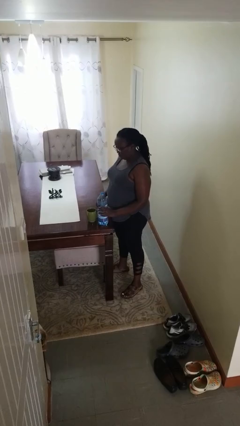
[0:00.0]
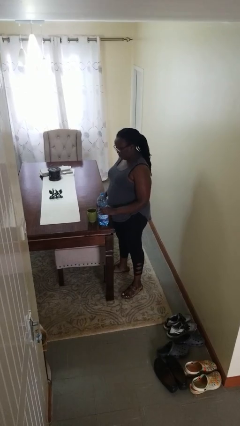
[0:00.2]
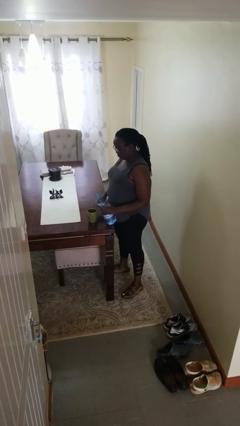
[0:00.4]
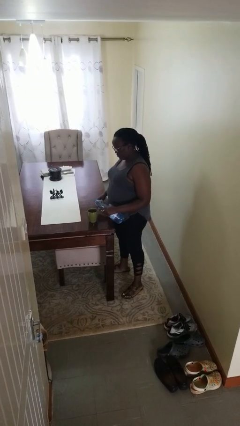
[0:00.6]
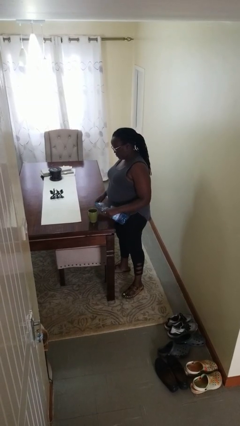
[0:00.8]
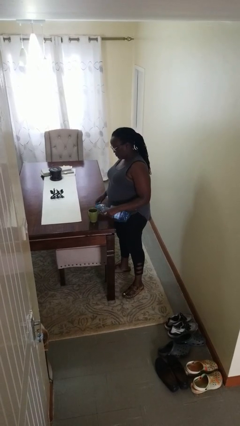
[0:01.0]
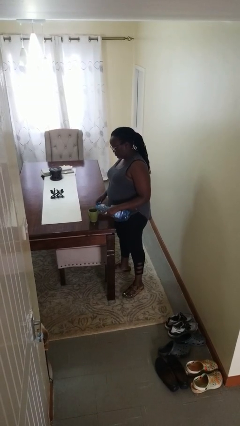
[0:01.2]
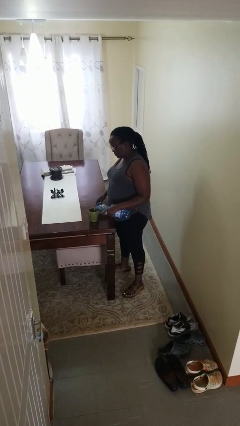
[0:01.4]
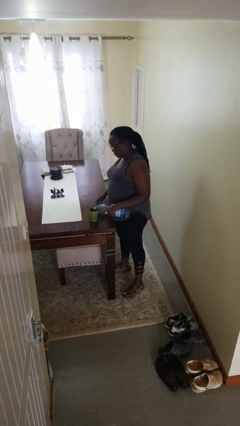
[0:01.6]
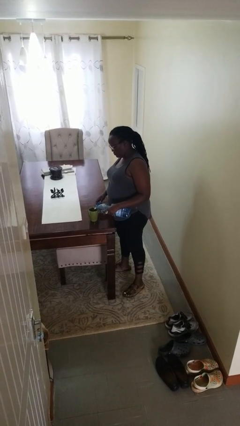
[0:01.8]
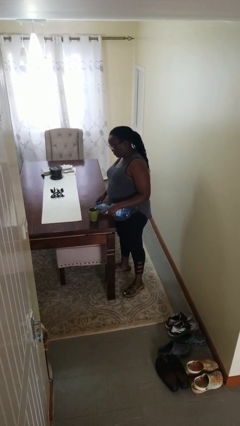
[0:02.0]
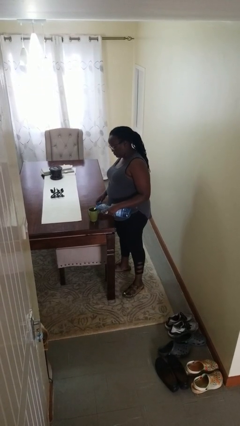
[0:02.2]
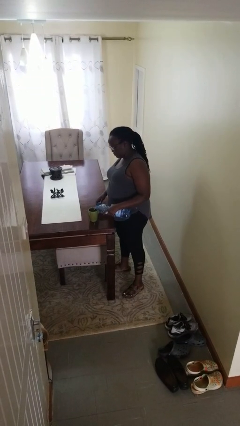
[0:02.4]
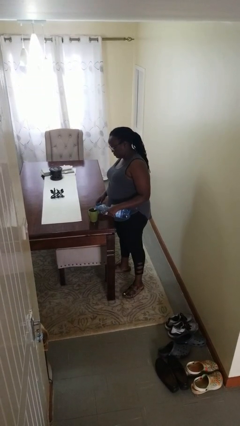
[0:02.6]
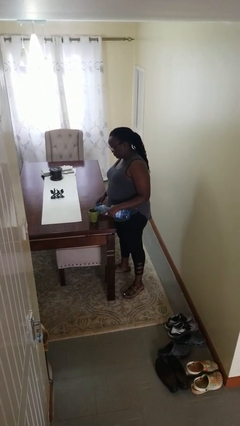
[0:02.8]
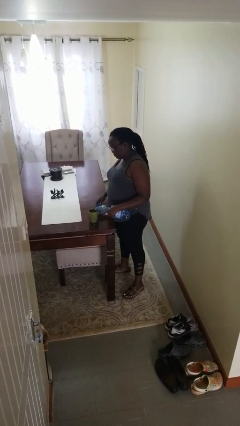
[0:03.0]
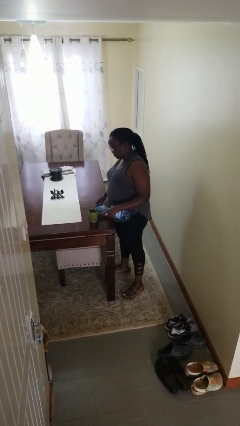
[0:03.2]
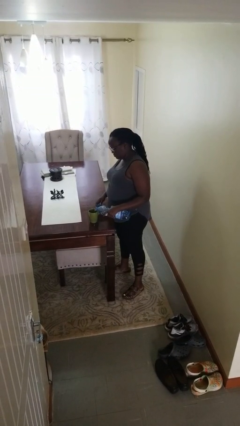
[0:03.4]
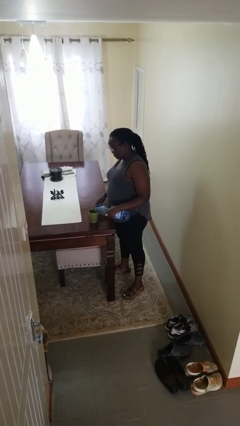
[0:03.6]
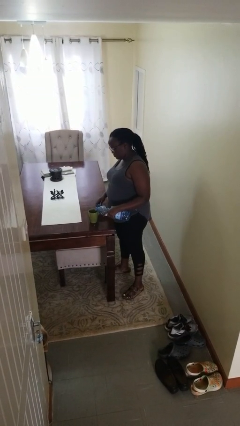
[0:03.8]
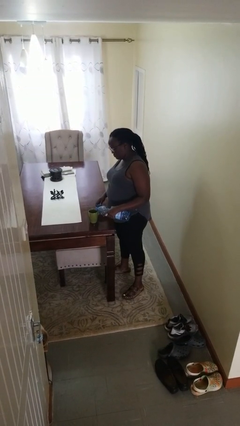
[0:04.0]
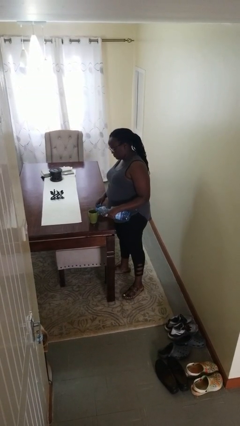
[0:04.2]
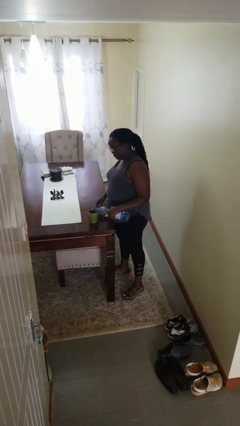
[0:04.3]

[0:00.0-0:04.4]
person pours liquid into cup

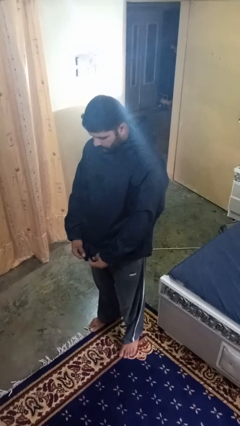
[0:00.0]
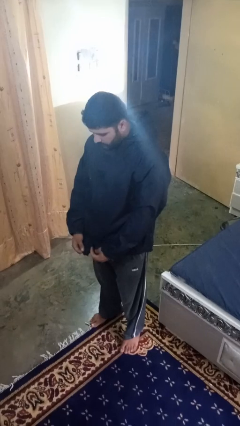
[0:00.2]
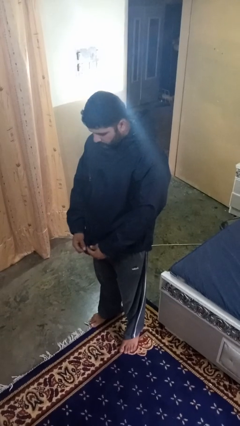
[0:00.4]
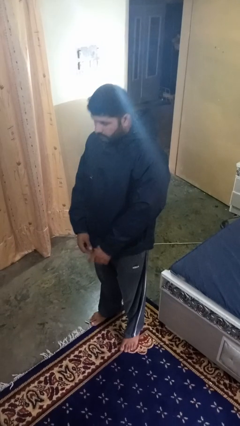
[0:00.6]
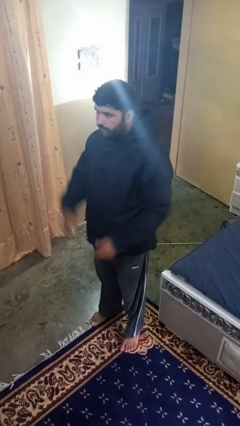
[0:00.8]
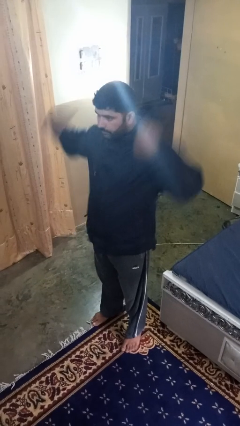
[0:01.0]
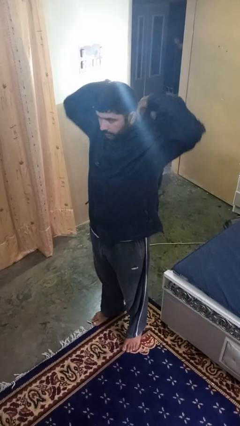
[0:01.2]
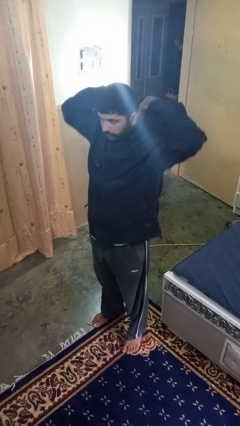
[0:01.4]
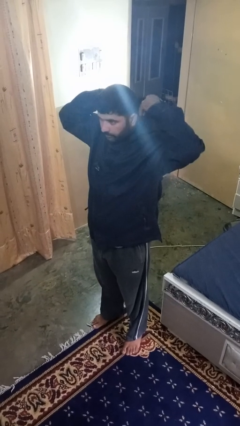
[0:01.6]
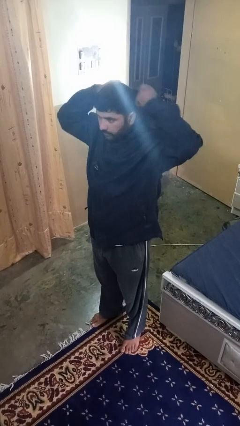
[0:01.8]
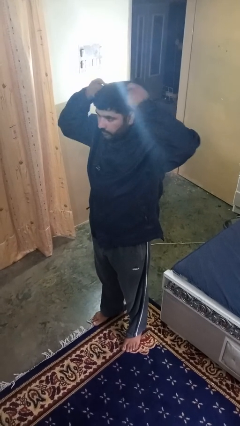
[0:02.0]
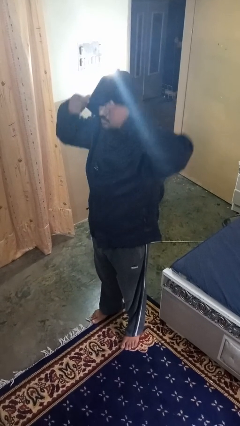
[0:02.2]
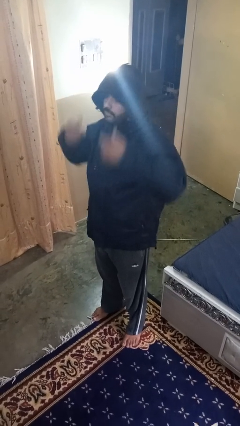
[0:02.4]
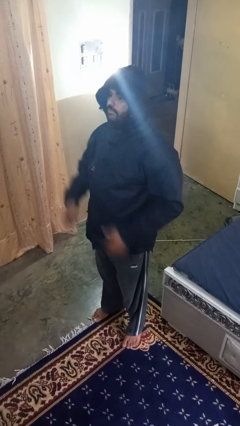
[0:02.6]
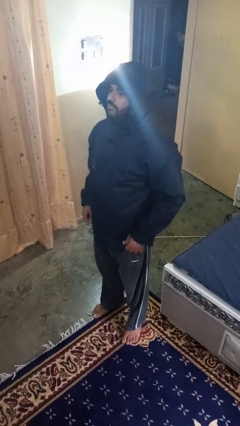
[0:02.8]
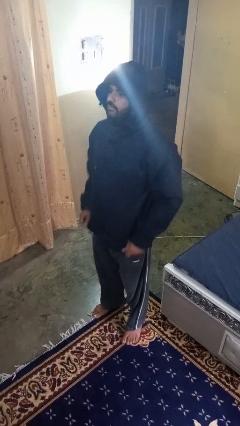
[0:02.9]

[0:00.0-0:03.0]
person puts on hoodie

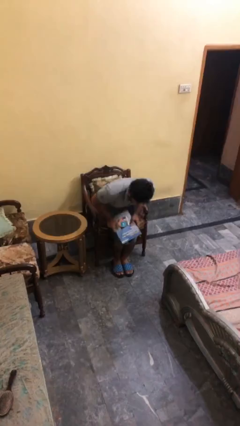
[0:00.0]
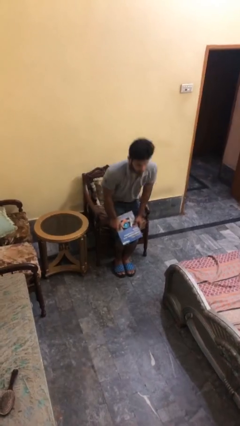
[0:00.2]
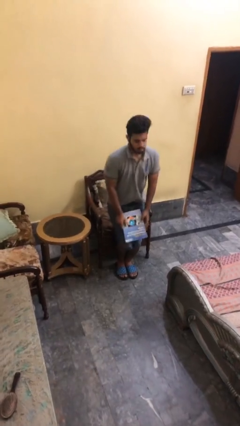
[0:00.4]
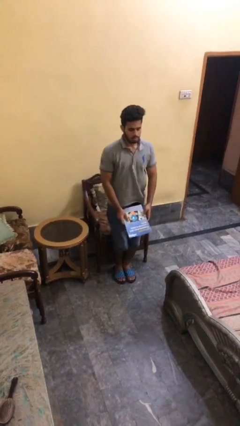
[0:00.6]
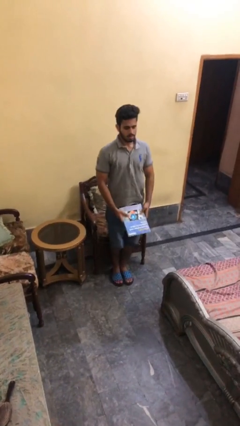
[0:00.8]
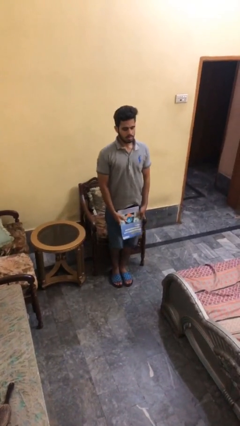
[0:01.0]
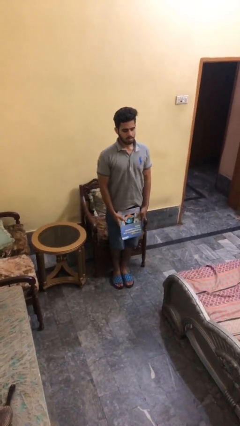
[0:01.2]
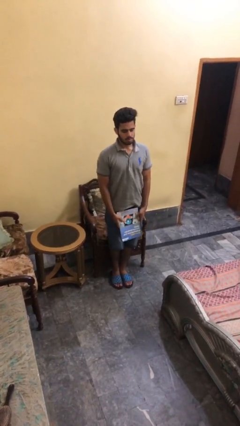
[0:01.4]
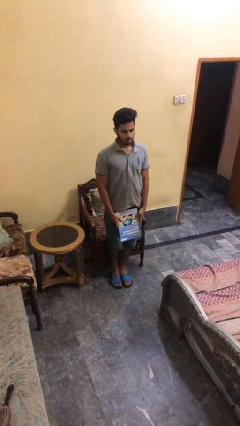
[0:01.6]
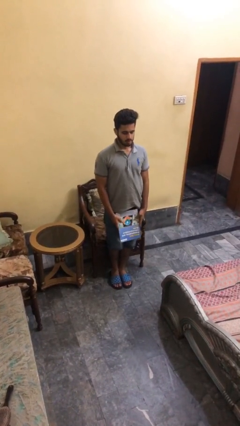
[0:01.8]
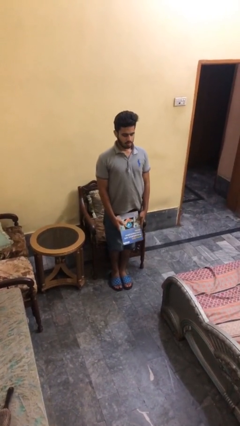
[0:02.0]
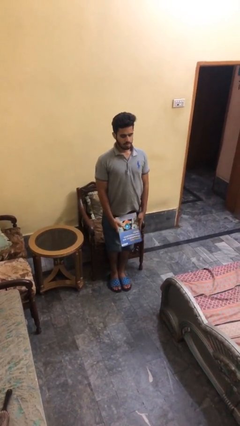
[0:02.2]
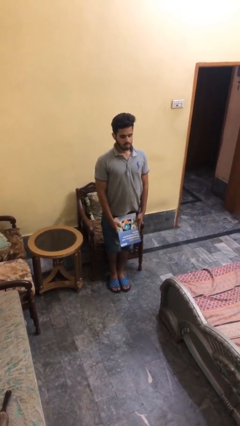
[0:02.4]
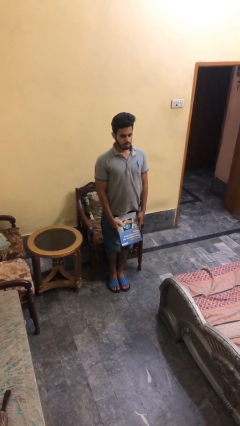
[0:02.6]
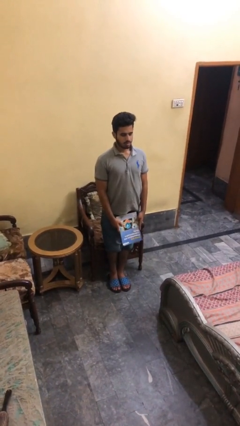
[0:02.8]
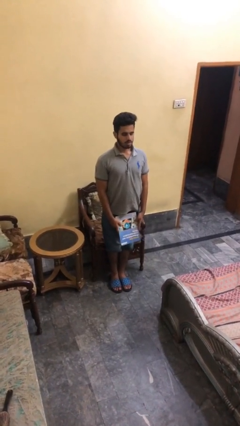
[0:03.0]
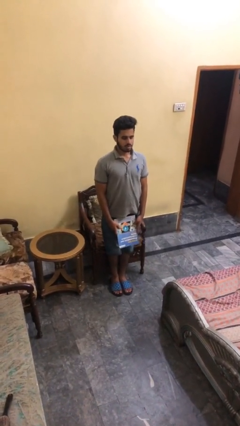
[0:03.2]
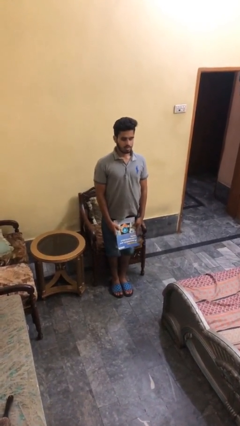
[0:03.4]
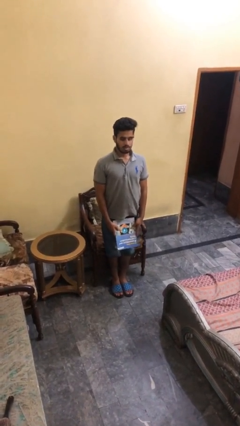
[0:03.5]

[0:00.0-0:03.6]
person stands up

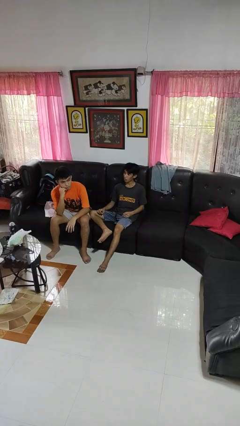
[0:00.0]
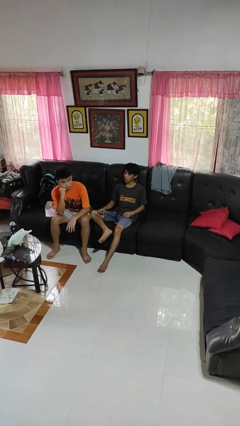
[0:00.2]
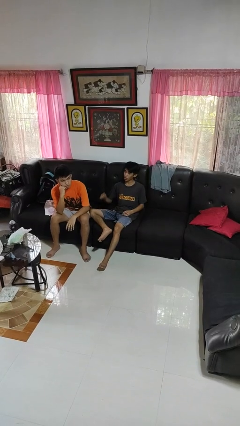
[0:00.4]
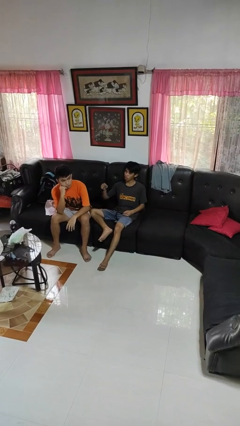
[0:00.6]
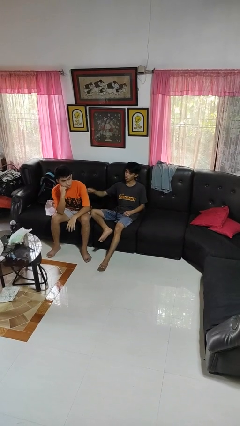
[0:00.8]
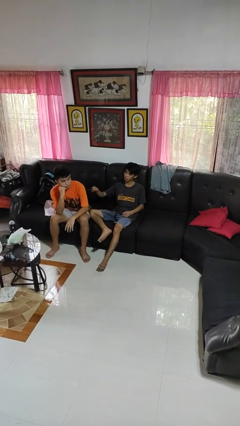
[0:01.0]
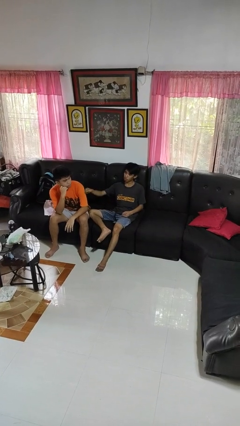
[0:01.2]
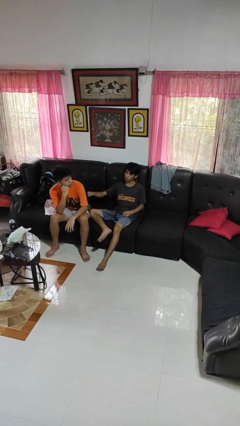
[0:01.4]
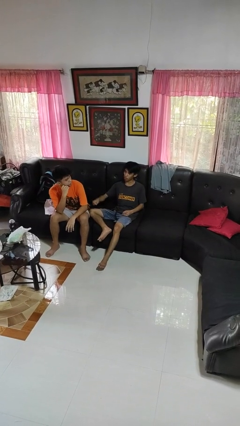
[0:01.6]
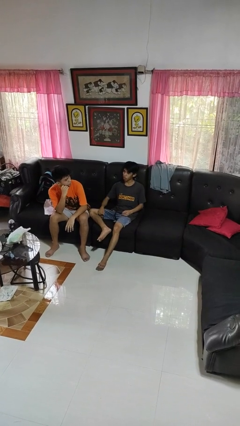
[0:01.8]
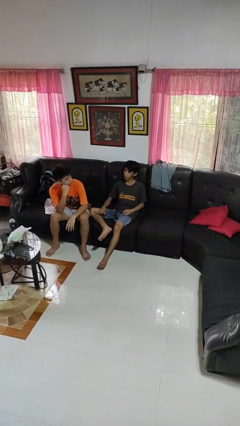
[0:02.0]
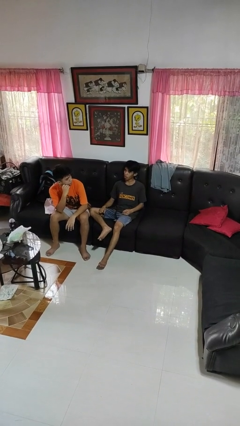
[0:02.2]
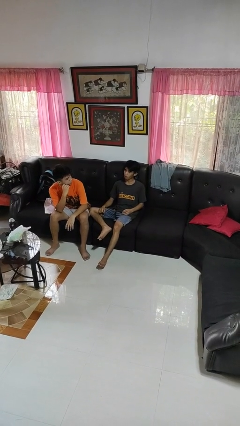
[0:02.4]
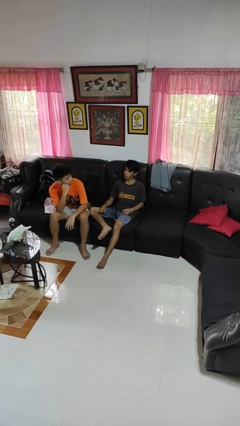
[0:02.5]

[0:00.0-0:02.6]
person pounds shoulders of person

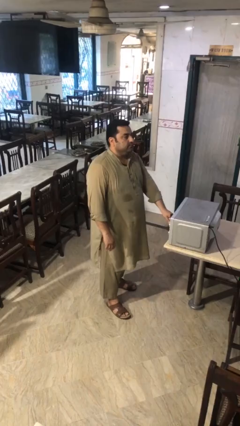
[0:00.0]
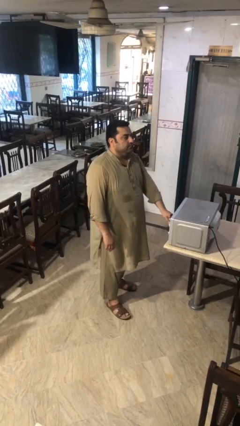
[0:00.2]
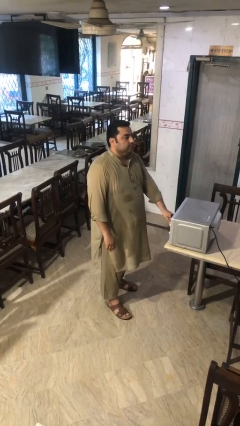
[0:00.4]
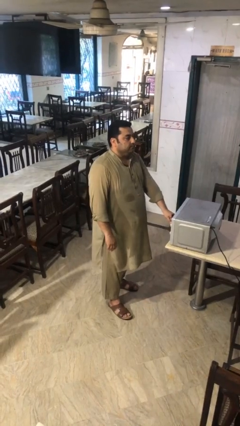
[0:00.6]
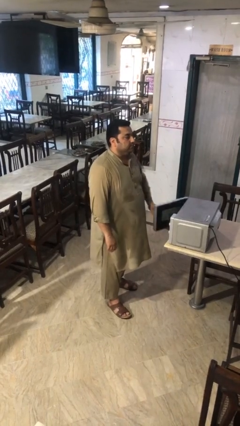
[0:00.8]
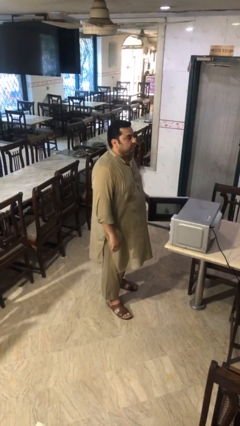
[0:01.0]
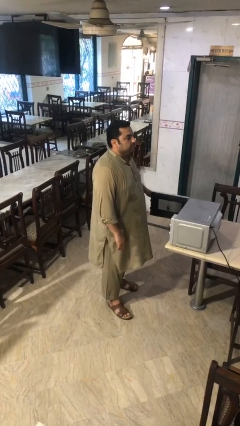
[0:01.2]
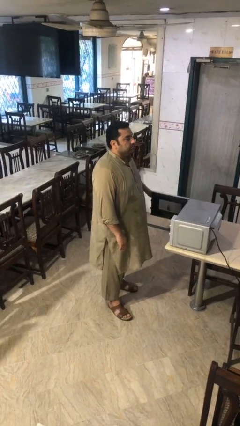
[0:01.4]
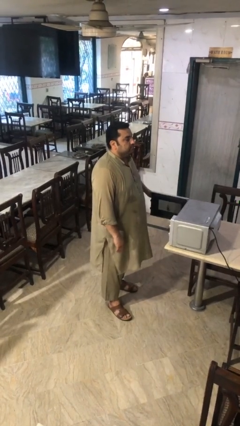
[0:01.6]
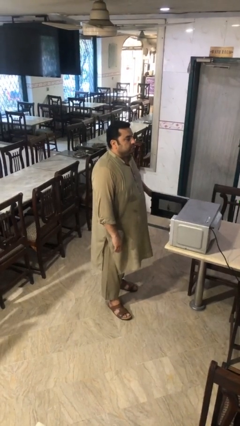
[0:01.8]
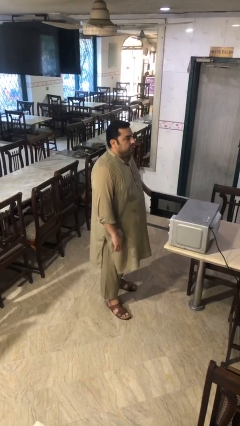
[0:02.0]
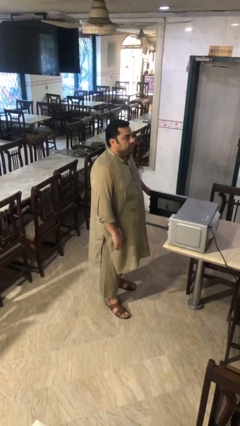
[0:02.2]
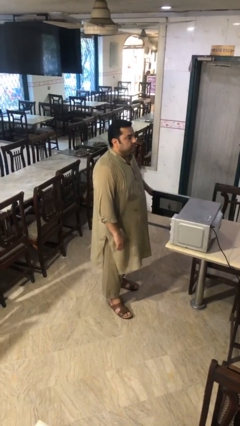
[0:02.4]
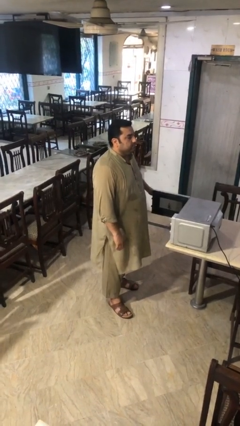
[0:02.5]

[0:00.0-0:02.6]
person opens microwave

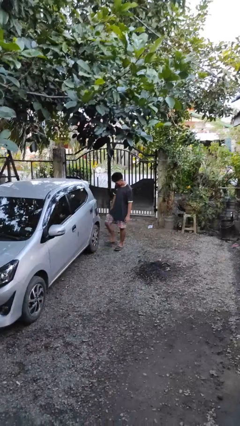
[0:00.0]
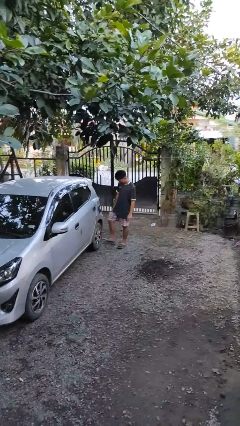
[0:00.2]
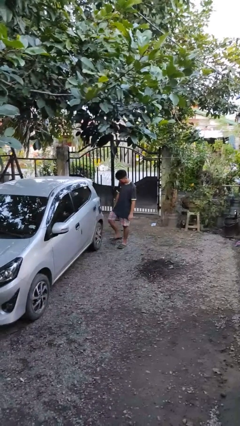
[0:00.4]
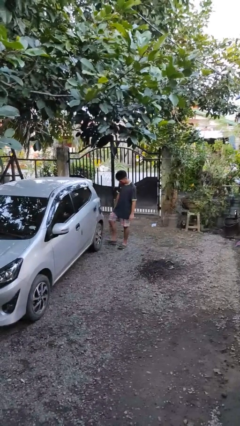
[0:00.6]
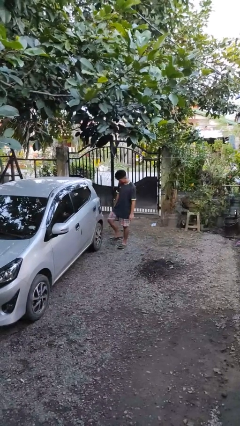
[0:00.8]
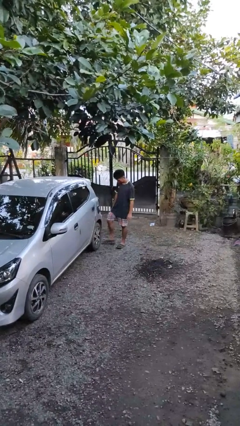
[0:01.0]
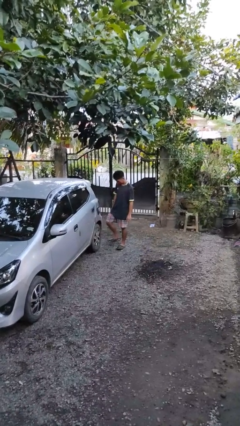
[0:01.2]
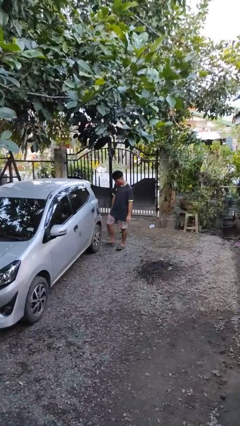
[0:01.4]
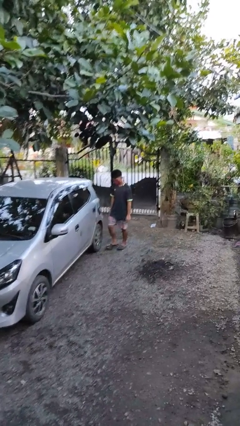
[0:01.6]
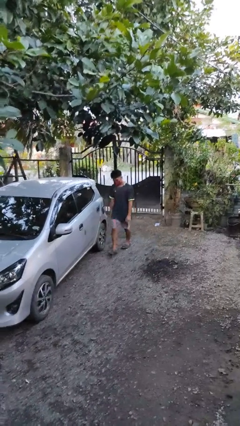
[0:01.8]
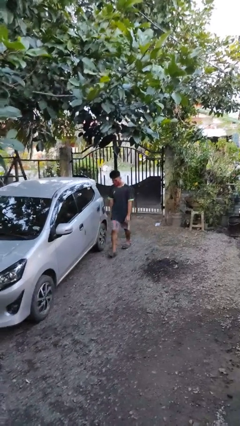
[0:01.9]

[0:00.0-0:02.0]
person kicks car tires
